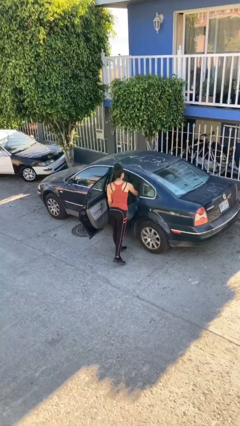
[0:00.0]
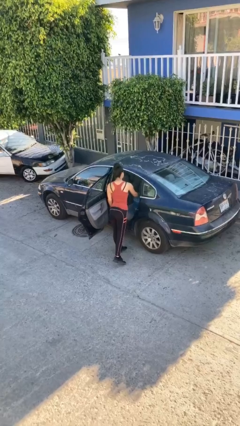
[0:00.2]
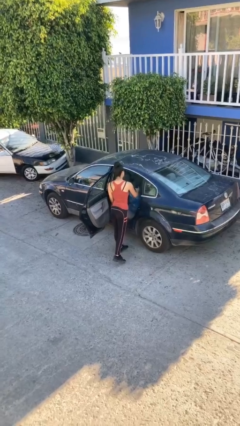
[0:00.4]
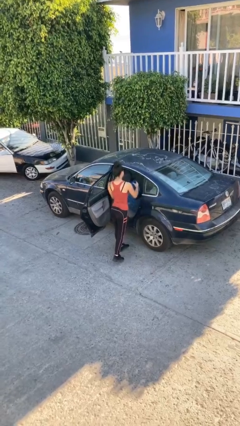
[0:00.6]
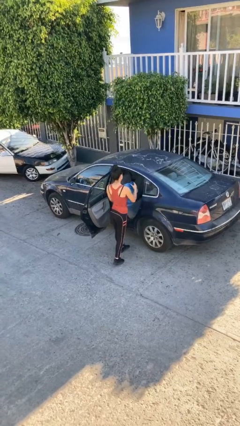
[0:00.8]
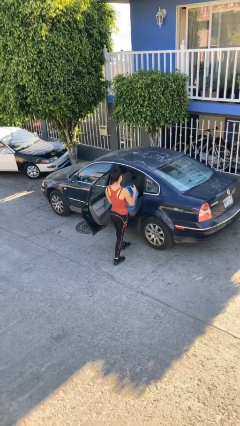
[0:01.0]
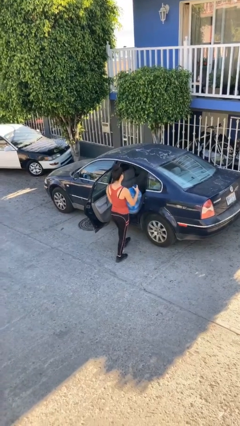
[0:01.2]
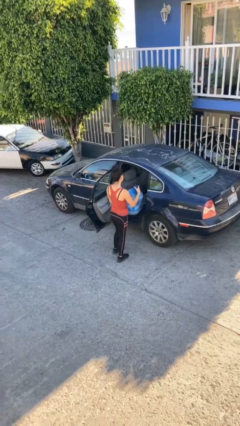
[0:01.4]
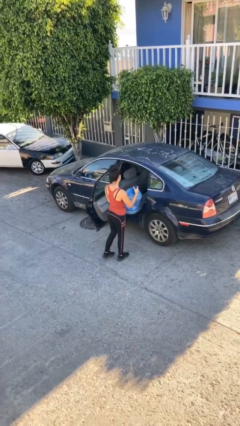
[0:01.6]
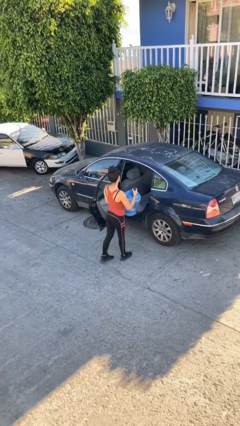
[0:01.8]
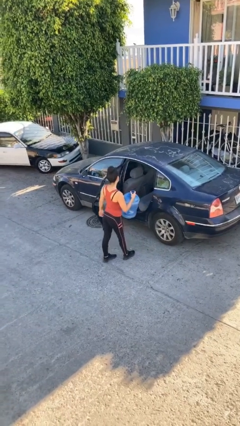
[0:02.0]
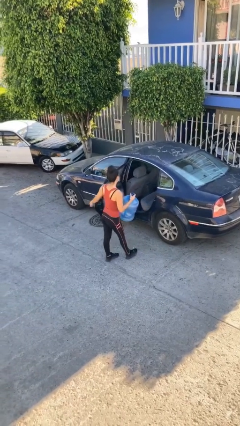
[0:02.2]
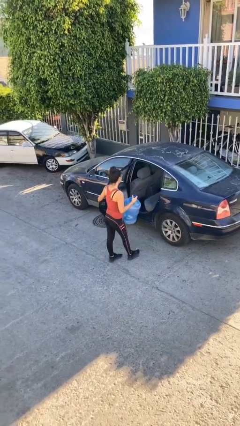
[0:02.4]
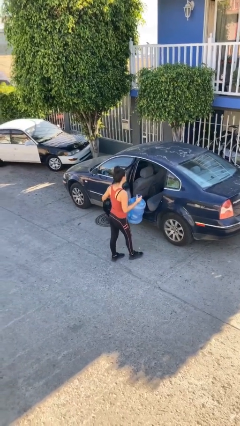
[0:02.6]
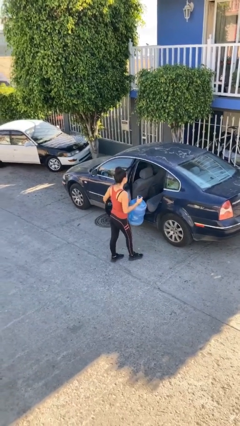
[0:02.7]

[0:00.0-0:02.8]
person unloads car

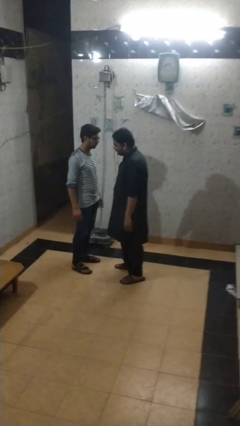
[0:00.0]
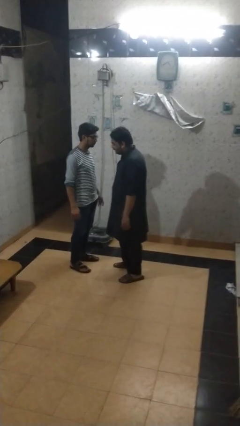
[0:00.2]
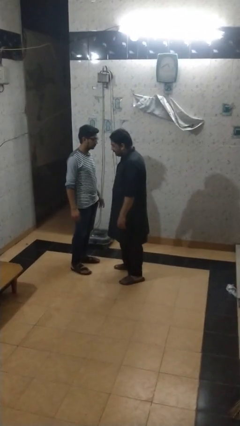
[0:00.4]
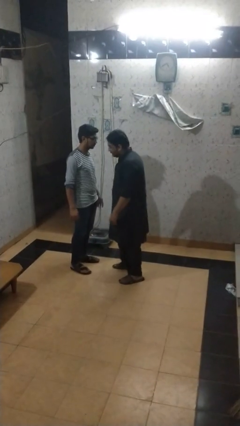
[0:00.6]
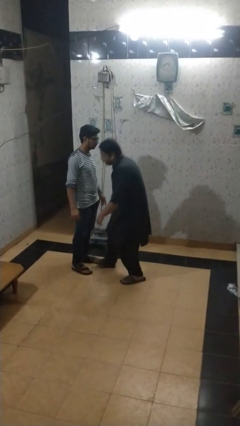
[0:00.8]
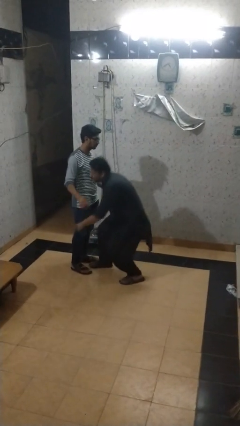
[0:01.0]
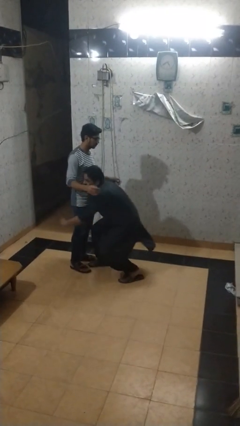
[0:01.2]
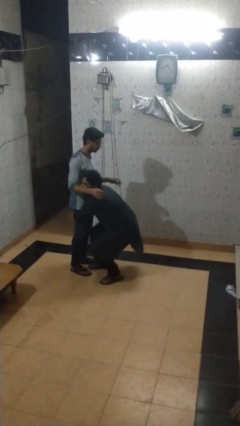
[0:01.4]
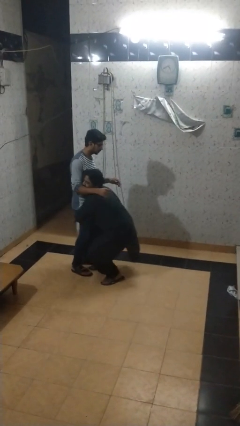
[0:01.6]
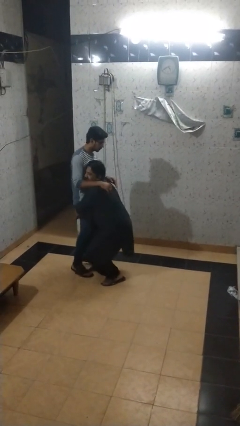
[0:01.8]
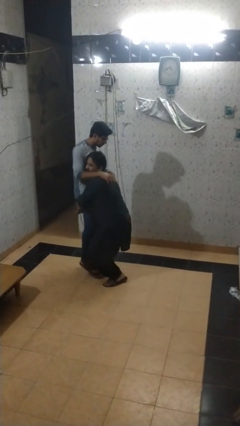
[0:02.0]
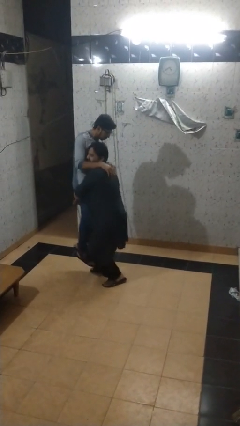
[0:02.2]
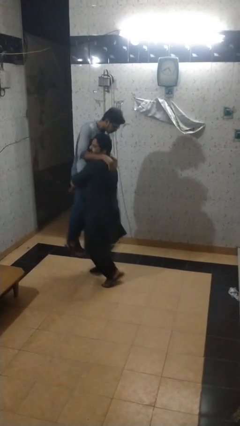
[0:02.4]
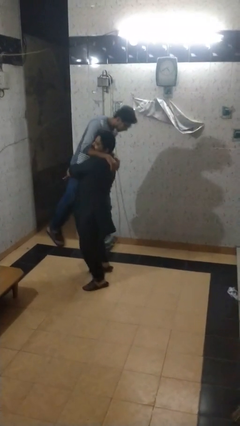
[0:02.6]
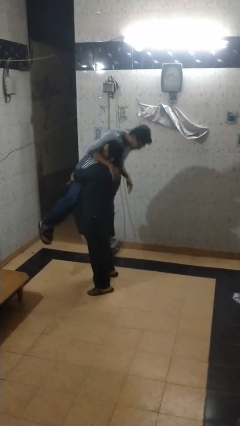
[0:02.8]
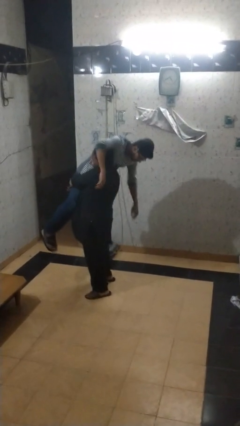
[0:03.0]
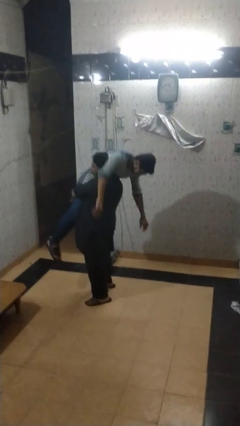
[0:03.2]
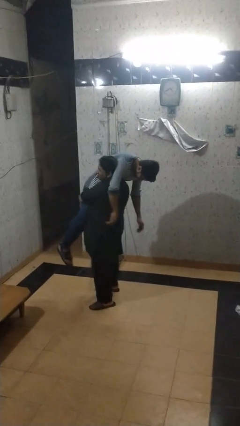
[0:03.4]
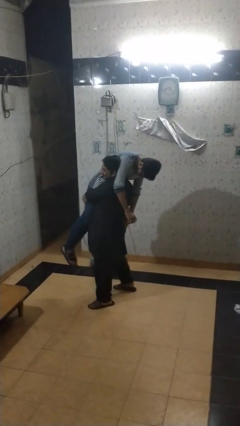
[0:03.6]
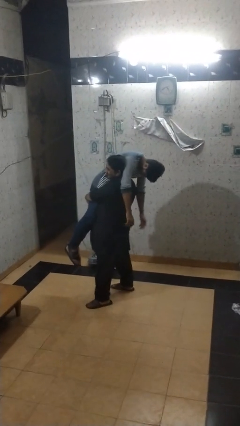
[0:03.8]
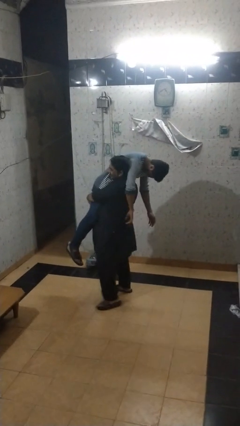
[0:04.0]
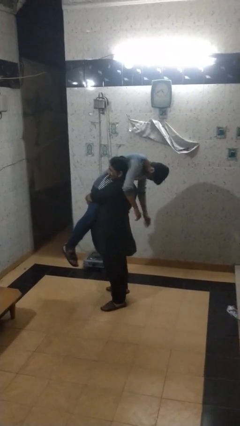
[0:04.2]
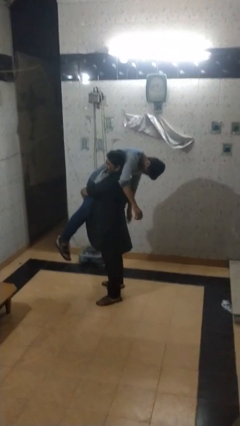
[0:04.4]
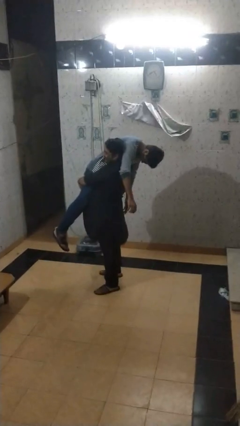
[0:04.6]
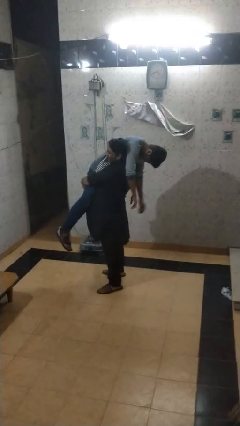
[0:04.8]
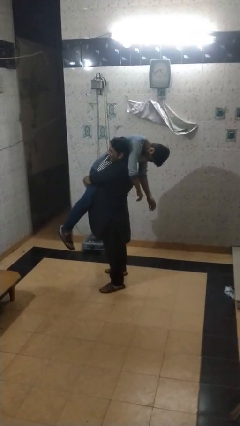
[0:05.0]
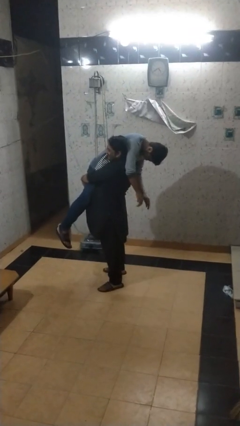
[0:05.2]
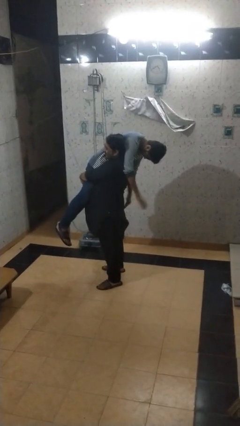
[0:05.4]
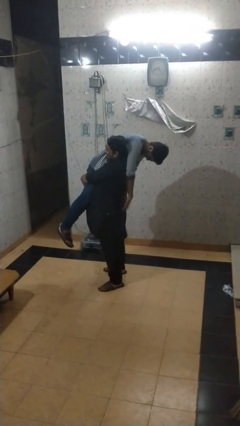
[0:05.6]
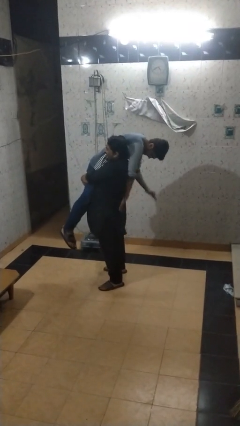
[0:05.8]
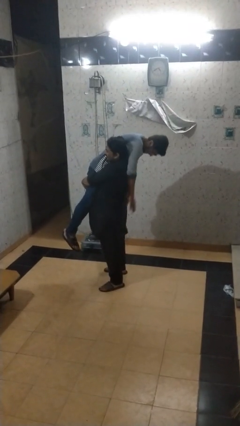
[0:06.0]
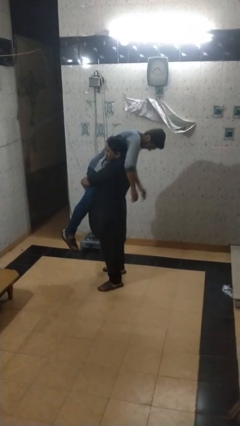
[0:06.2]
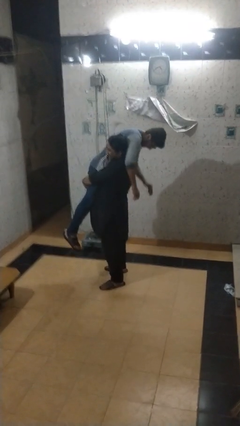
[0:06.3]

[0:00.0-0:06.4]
person carries person over shoulder

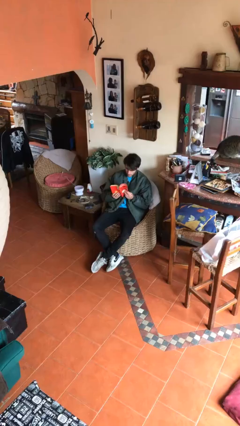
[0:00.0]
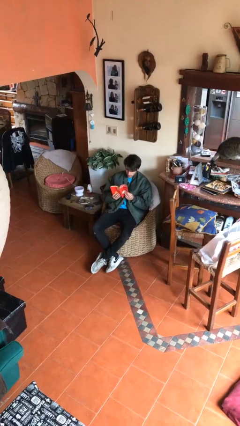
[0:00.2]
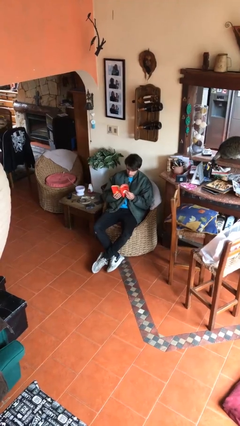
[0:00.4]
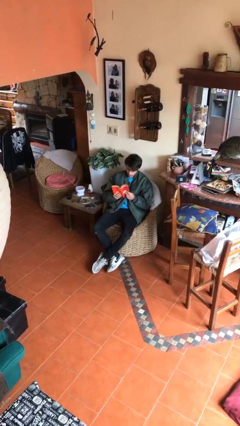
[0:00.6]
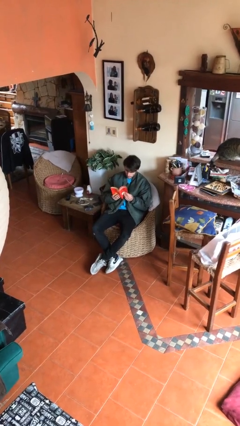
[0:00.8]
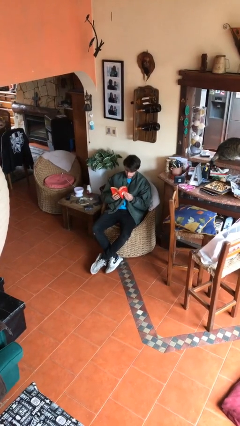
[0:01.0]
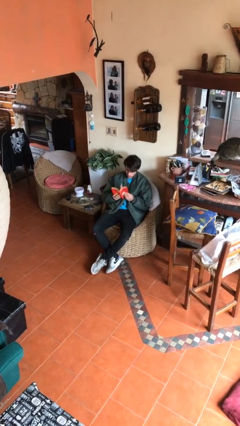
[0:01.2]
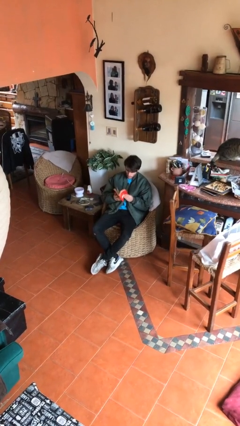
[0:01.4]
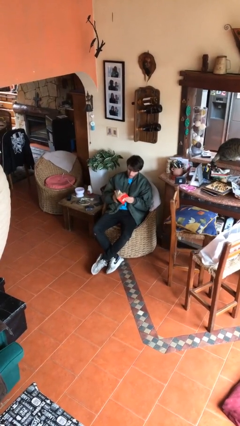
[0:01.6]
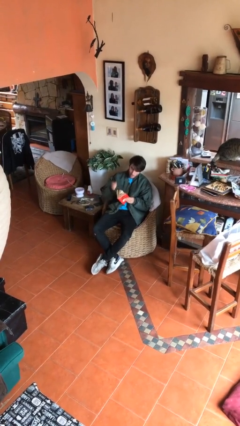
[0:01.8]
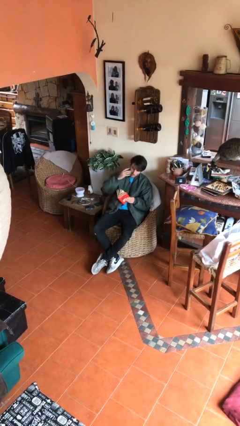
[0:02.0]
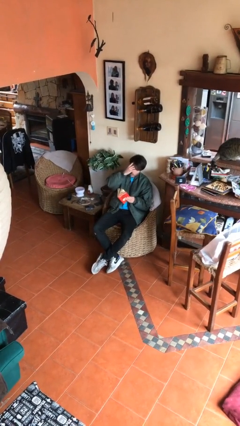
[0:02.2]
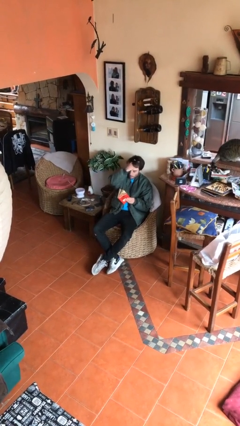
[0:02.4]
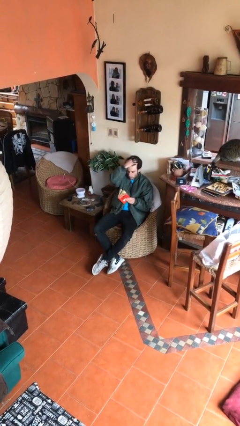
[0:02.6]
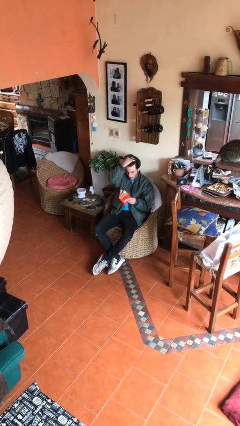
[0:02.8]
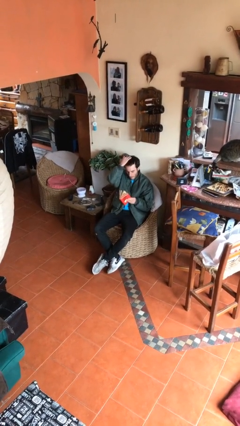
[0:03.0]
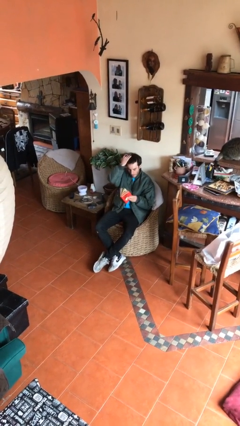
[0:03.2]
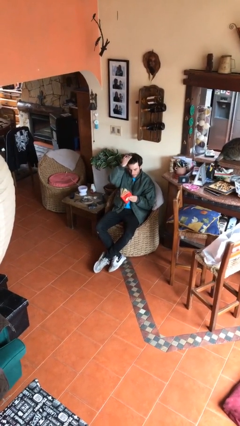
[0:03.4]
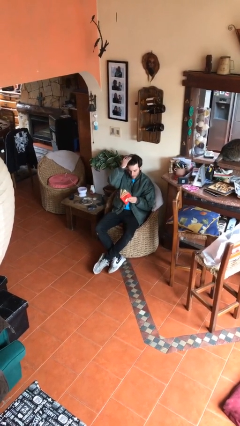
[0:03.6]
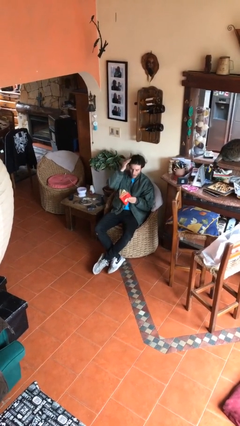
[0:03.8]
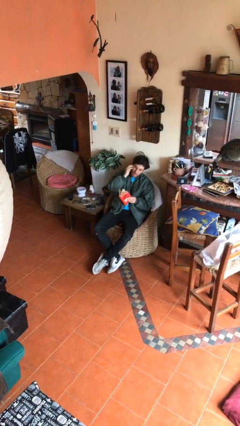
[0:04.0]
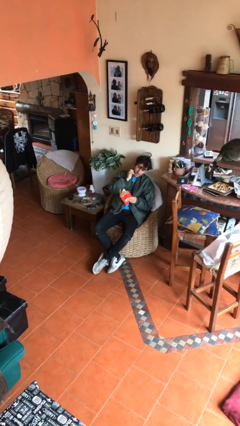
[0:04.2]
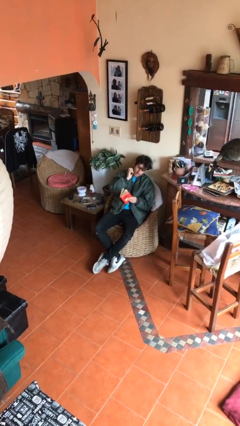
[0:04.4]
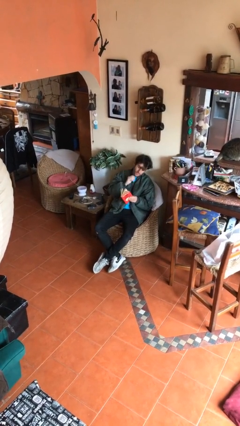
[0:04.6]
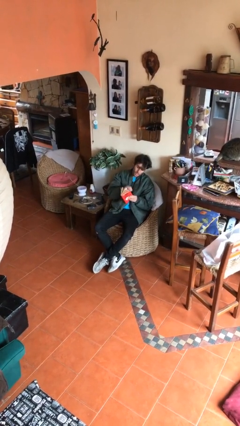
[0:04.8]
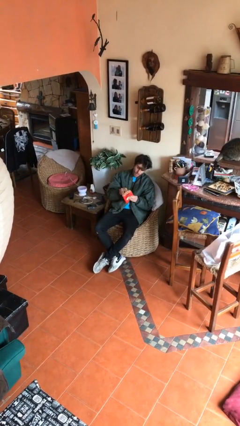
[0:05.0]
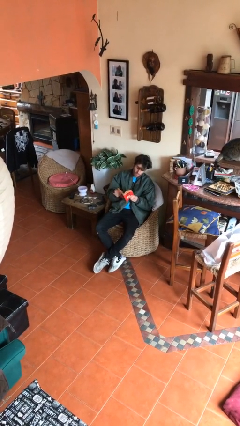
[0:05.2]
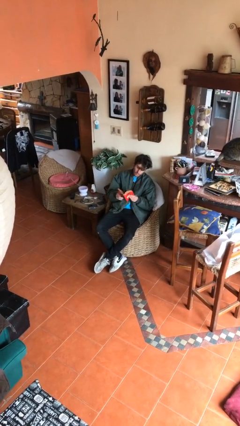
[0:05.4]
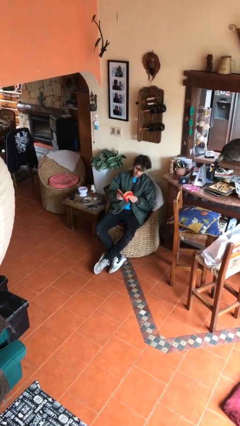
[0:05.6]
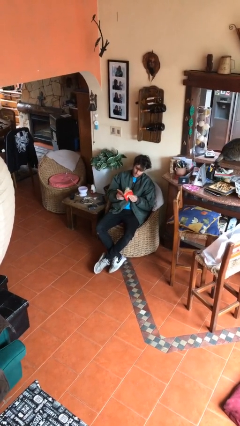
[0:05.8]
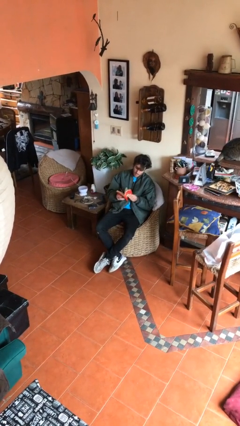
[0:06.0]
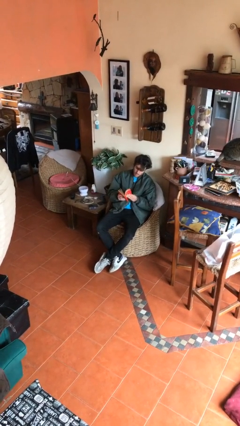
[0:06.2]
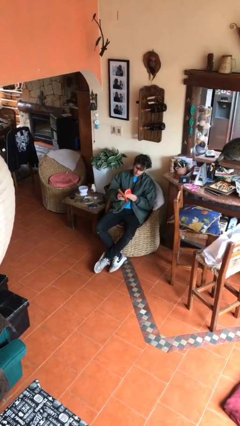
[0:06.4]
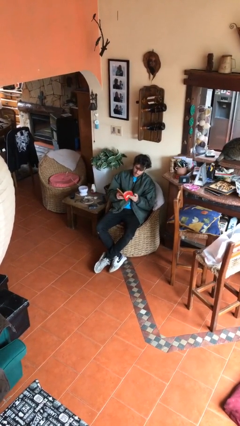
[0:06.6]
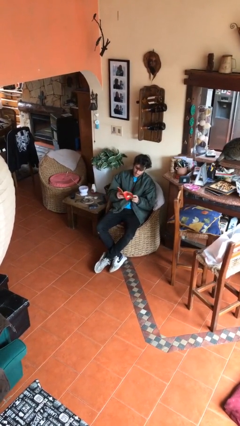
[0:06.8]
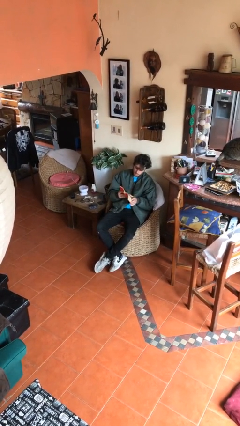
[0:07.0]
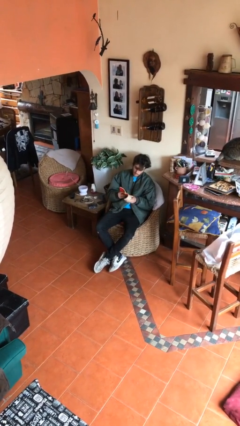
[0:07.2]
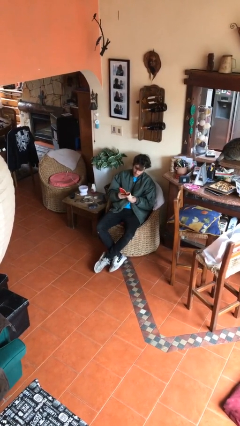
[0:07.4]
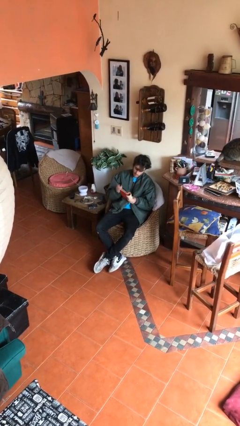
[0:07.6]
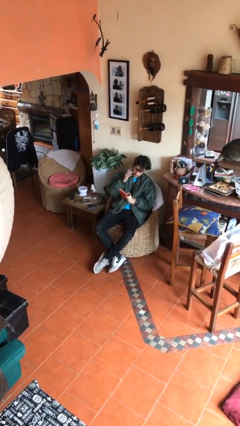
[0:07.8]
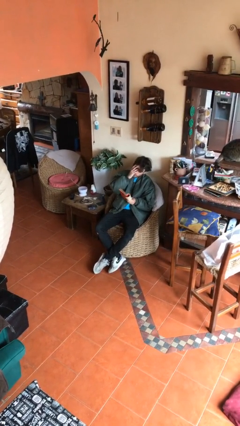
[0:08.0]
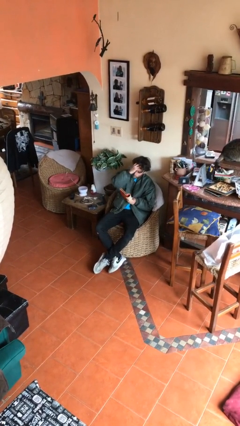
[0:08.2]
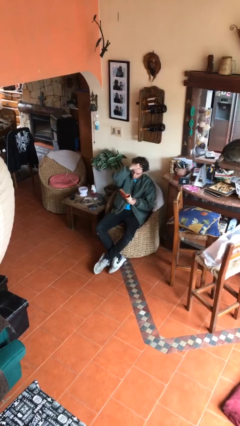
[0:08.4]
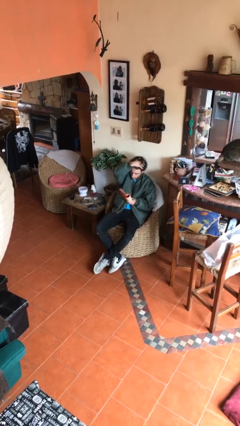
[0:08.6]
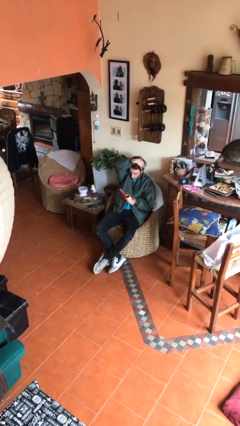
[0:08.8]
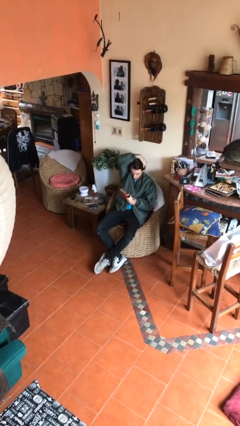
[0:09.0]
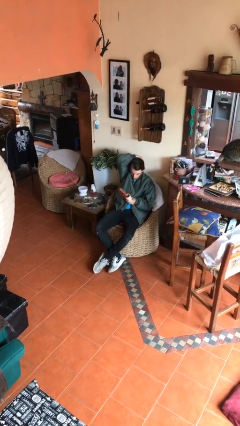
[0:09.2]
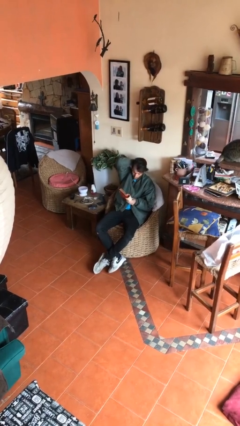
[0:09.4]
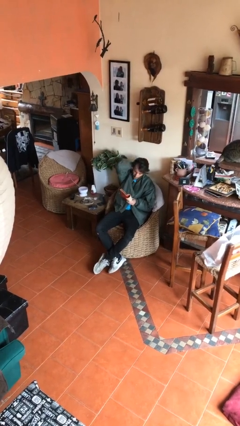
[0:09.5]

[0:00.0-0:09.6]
person reads document
